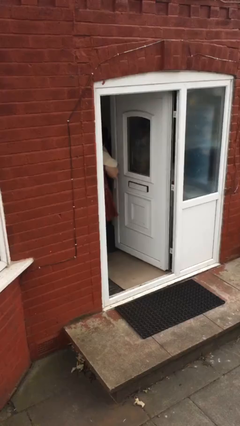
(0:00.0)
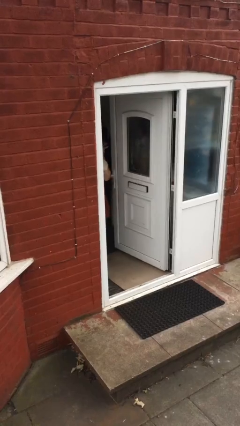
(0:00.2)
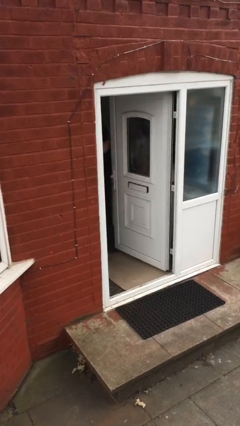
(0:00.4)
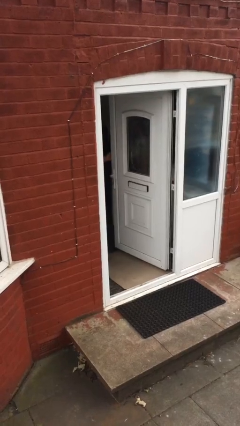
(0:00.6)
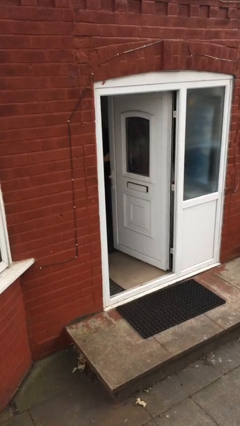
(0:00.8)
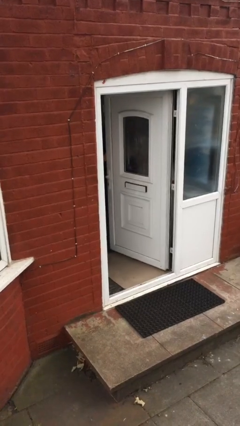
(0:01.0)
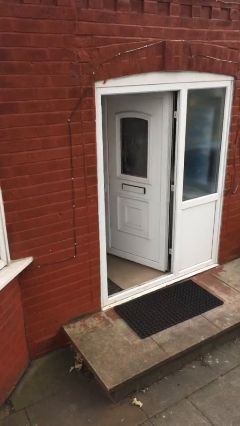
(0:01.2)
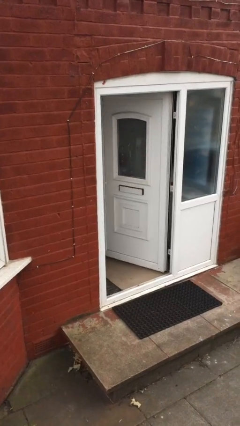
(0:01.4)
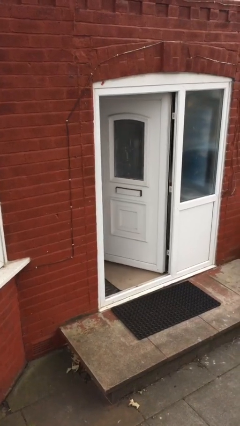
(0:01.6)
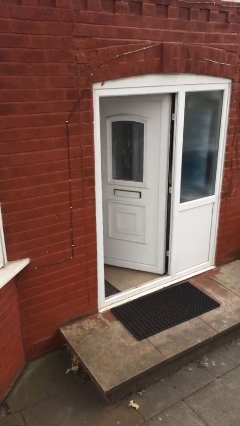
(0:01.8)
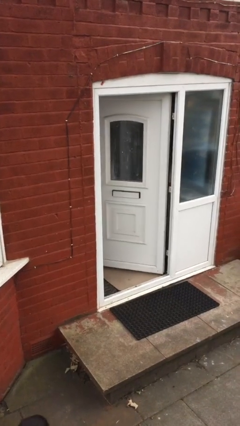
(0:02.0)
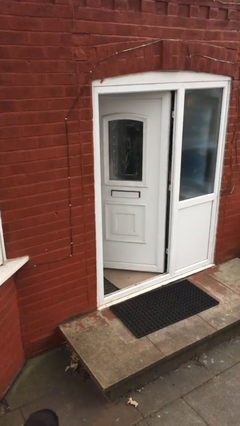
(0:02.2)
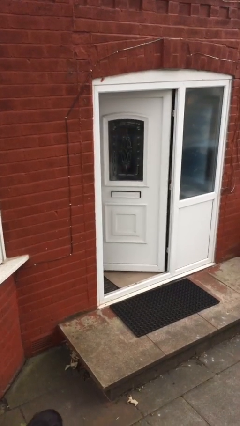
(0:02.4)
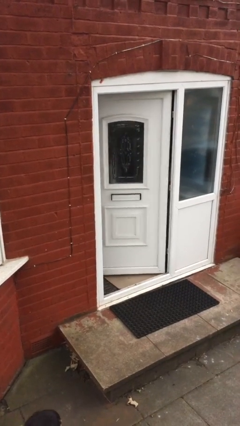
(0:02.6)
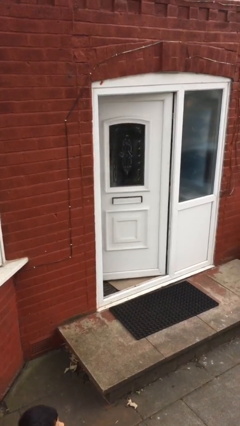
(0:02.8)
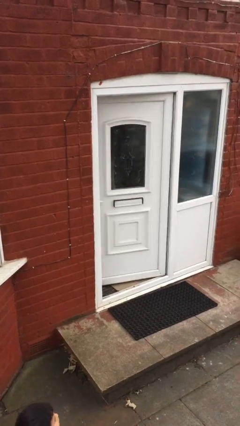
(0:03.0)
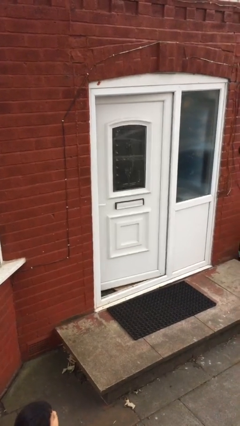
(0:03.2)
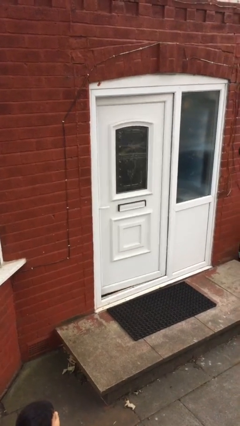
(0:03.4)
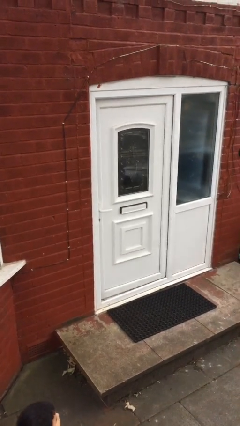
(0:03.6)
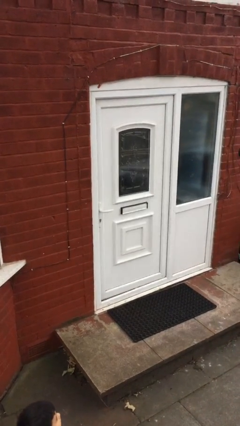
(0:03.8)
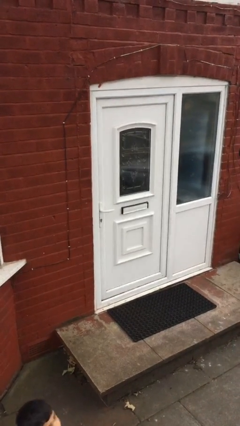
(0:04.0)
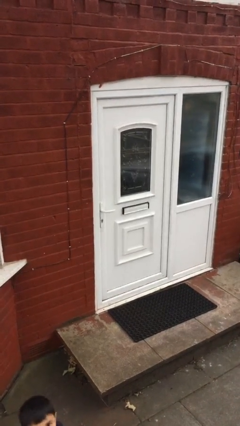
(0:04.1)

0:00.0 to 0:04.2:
person closes facility door

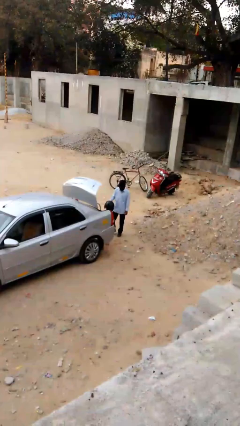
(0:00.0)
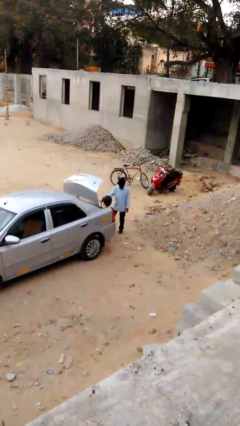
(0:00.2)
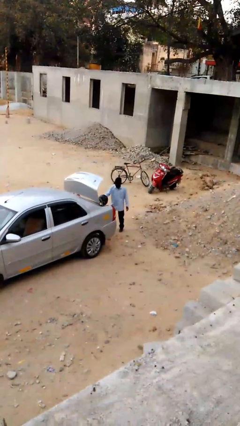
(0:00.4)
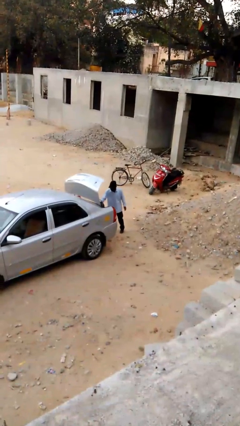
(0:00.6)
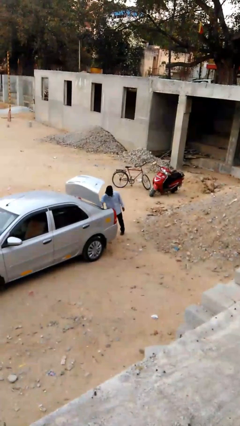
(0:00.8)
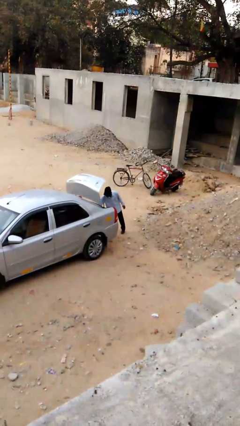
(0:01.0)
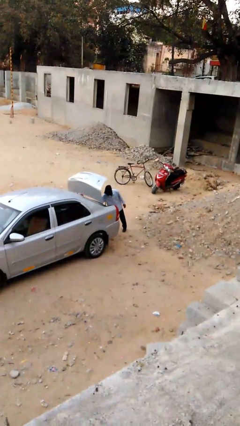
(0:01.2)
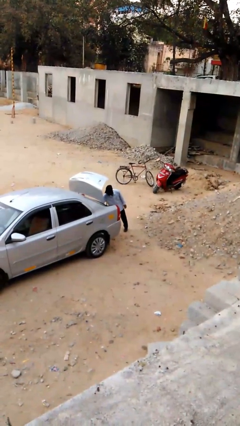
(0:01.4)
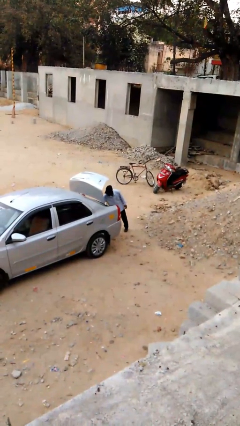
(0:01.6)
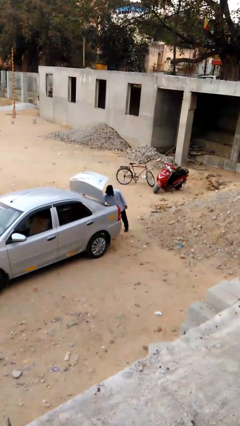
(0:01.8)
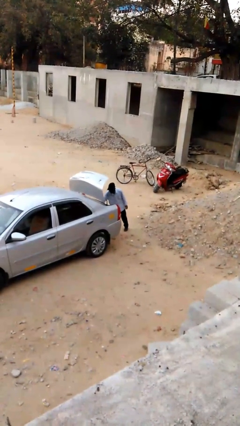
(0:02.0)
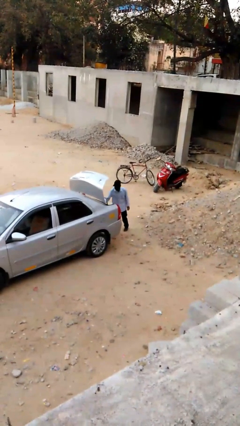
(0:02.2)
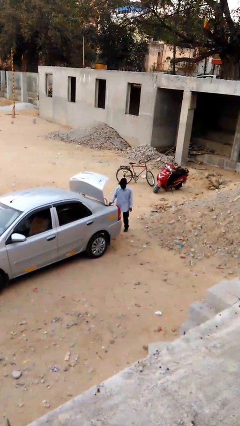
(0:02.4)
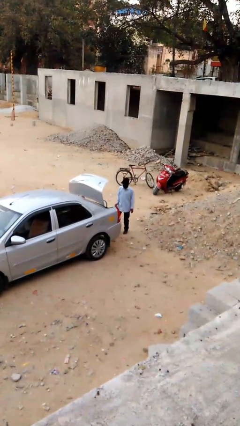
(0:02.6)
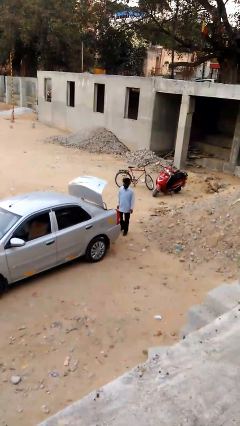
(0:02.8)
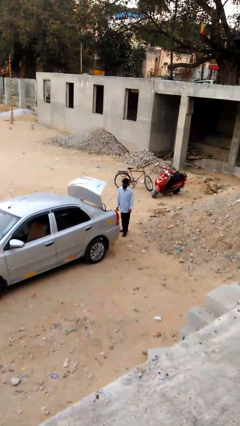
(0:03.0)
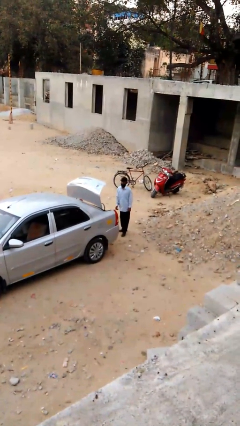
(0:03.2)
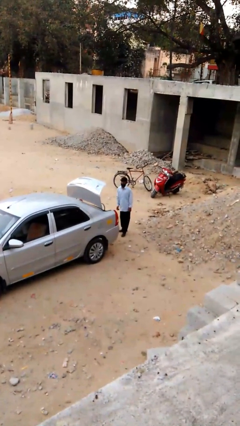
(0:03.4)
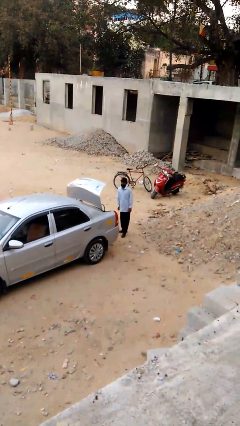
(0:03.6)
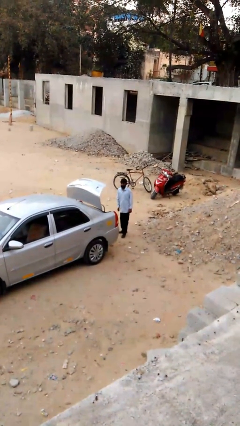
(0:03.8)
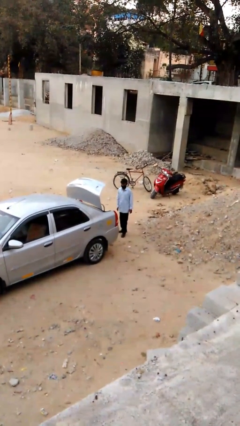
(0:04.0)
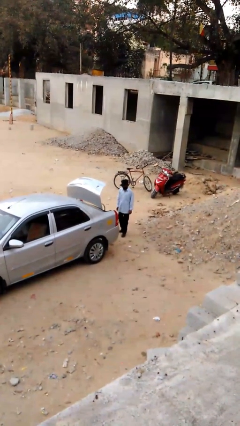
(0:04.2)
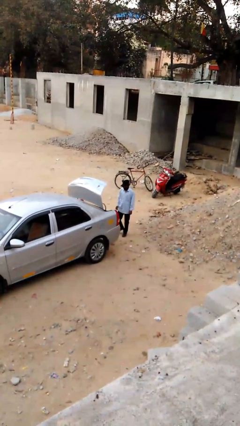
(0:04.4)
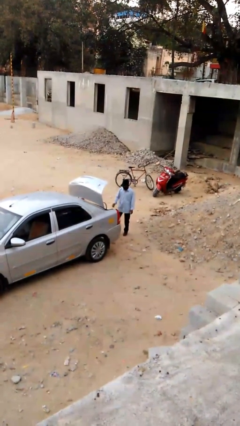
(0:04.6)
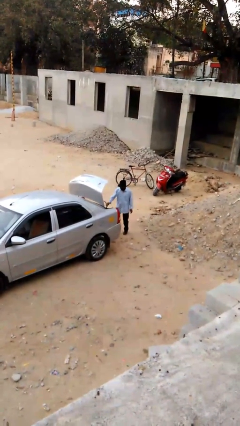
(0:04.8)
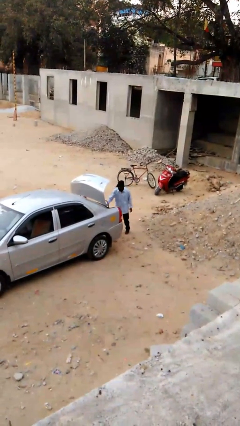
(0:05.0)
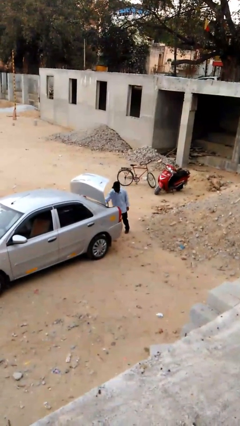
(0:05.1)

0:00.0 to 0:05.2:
person loads car

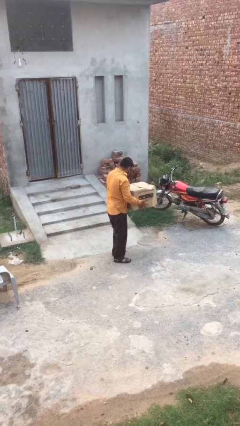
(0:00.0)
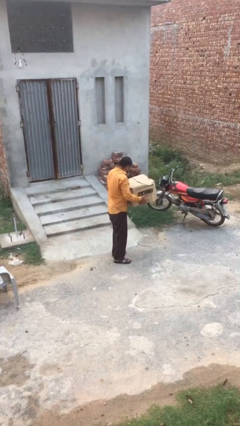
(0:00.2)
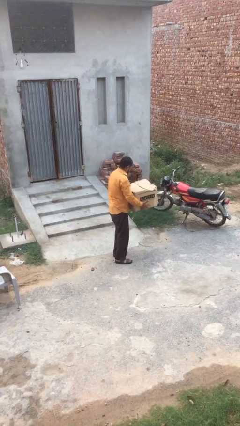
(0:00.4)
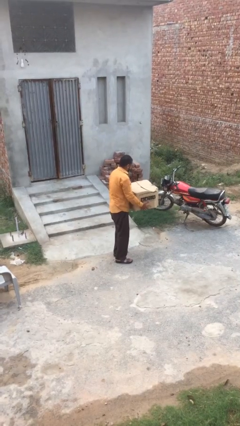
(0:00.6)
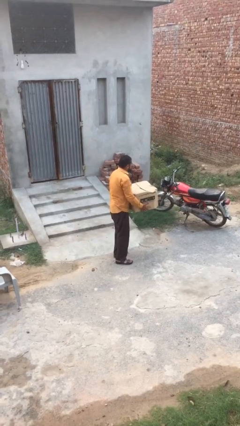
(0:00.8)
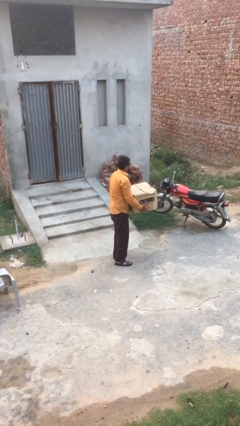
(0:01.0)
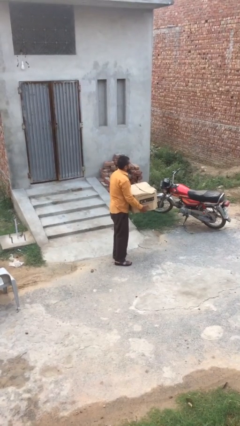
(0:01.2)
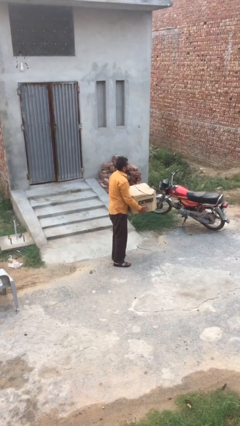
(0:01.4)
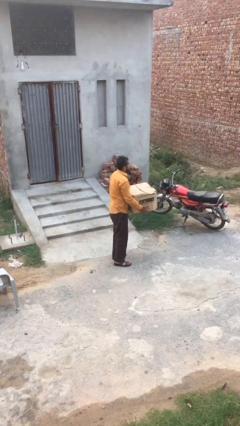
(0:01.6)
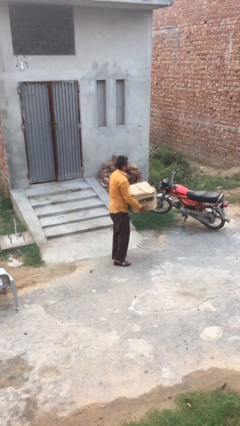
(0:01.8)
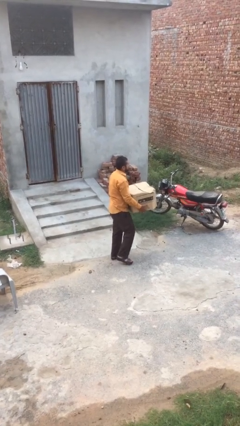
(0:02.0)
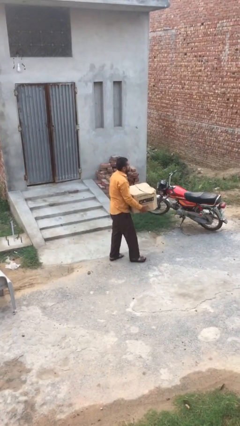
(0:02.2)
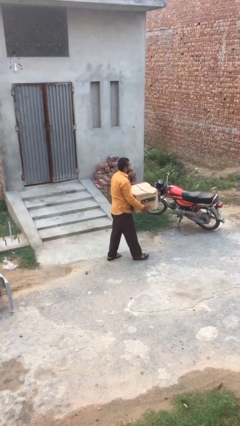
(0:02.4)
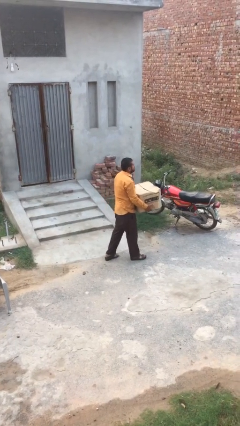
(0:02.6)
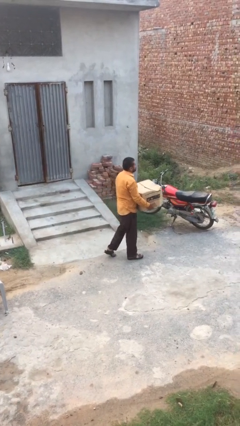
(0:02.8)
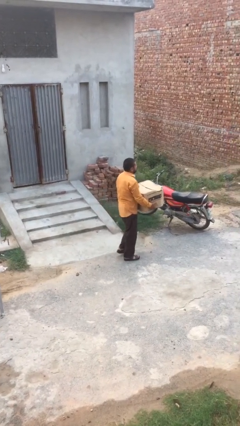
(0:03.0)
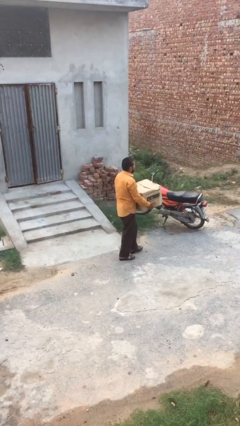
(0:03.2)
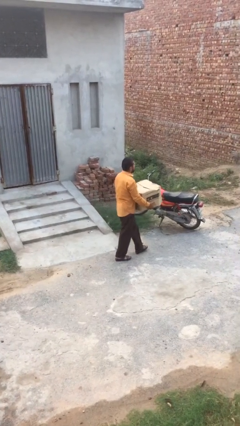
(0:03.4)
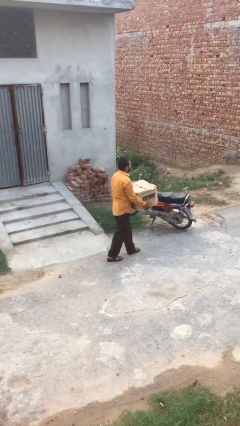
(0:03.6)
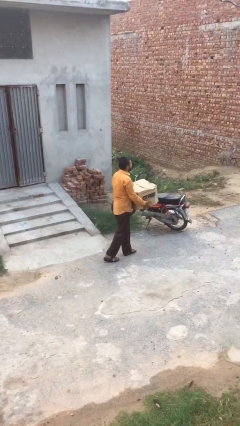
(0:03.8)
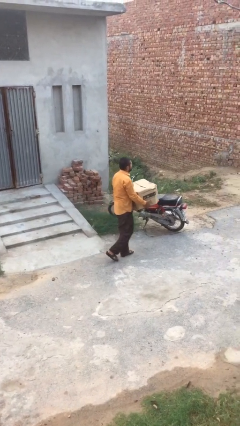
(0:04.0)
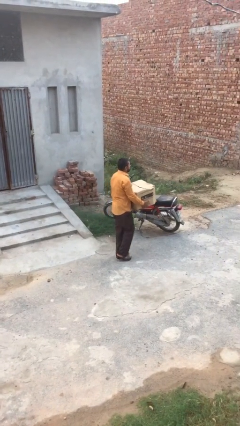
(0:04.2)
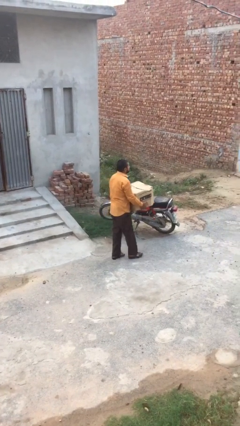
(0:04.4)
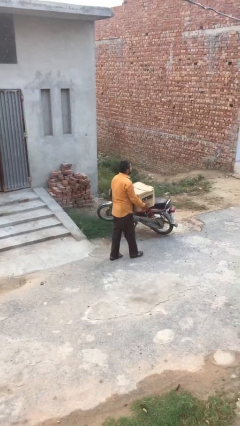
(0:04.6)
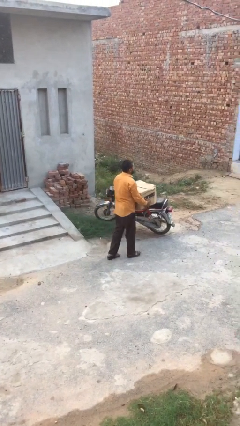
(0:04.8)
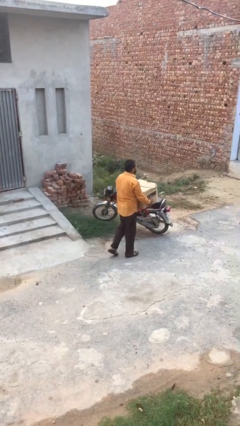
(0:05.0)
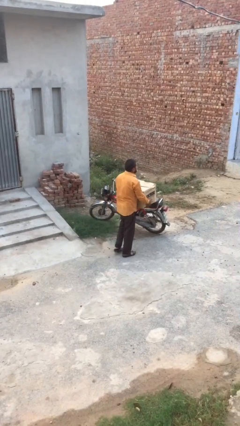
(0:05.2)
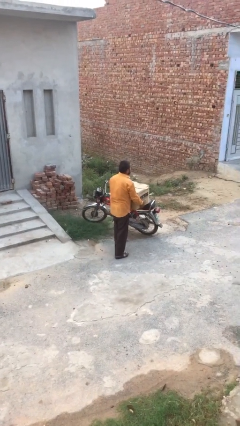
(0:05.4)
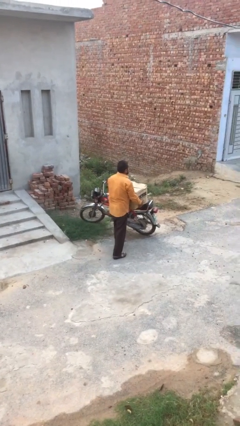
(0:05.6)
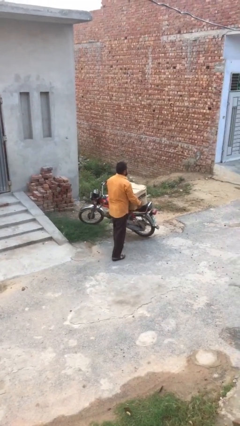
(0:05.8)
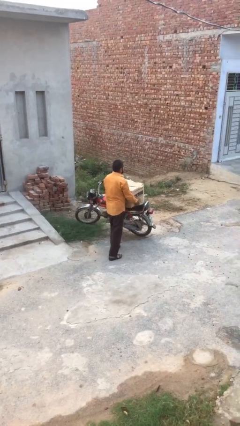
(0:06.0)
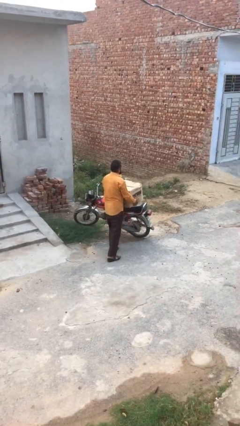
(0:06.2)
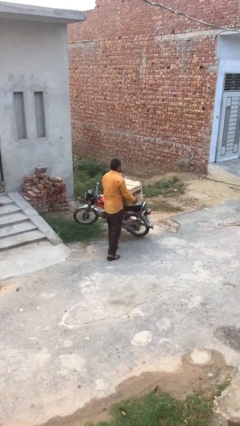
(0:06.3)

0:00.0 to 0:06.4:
person carries heavy object

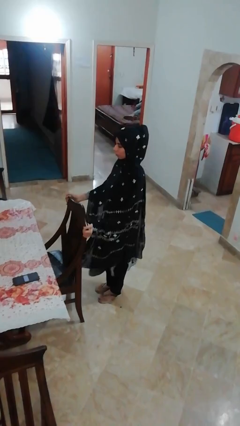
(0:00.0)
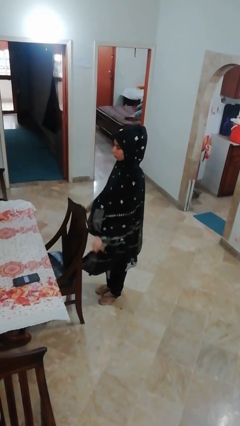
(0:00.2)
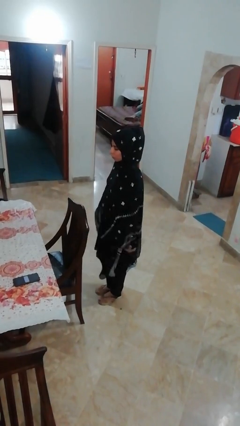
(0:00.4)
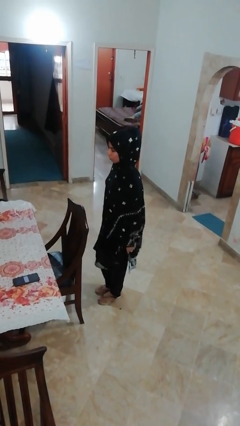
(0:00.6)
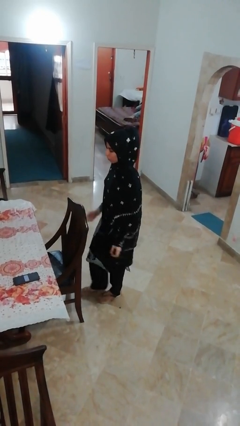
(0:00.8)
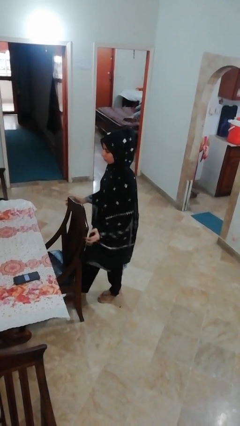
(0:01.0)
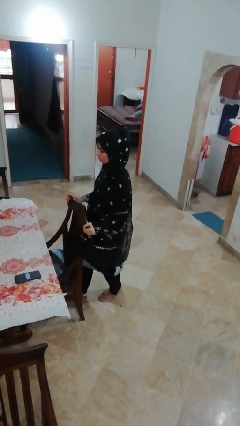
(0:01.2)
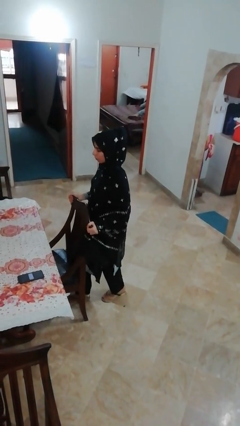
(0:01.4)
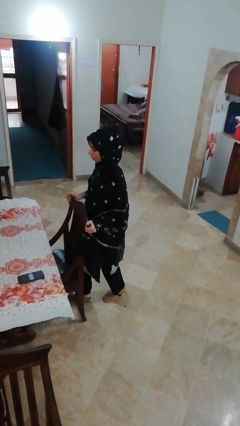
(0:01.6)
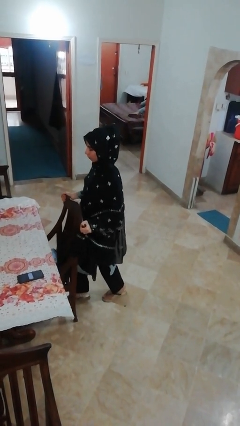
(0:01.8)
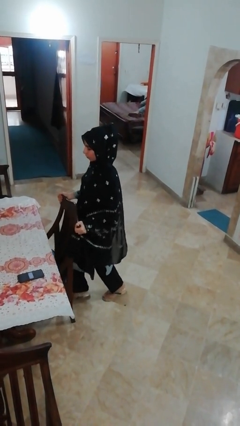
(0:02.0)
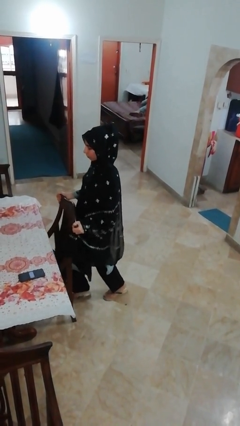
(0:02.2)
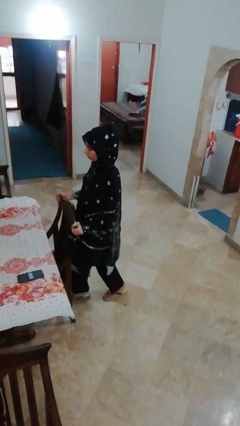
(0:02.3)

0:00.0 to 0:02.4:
person pushes in chair
